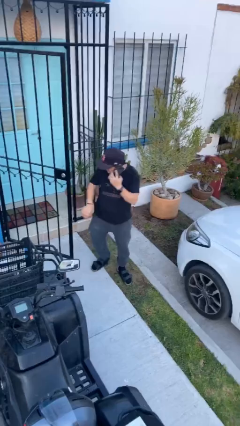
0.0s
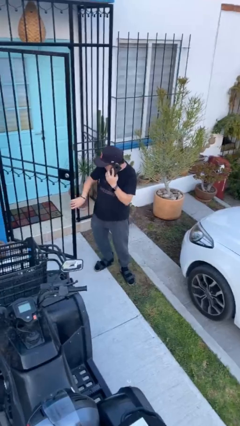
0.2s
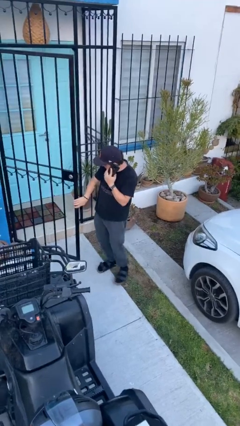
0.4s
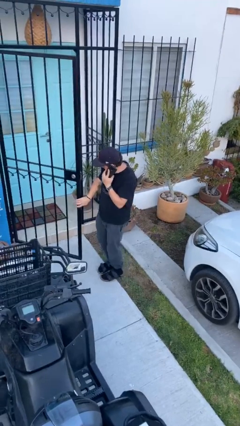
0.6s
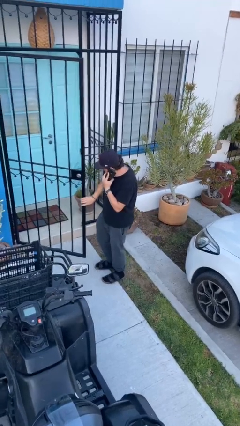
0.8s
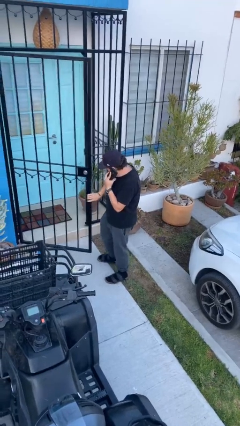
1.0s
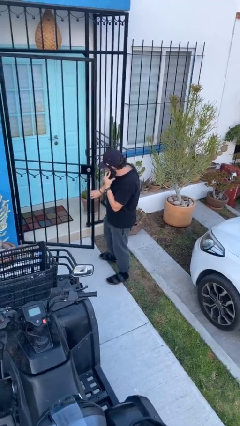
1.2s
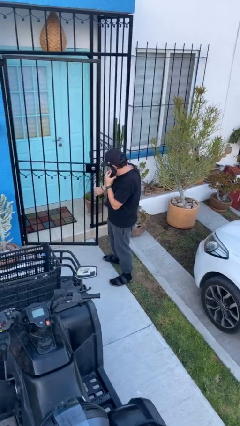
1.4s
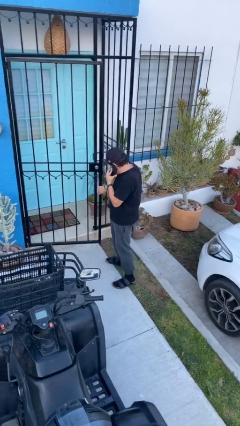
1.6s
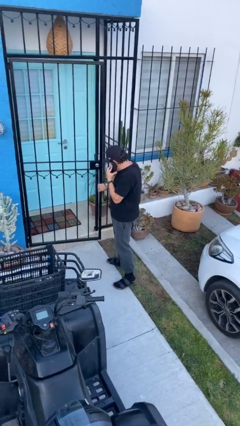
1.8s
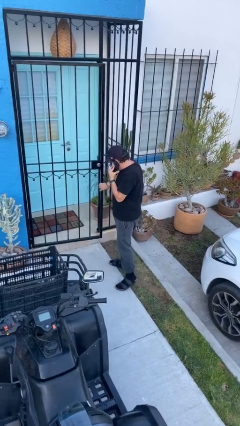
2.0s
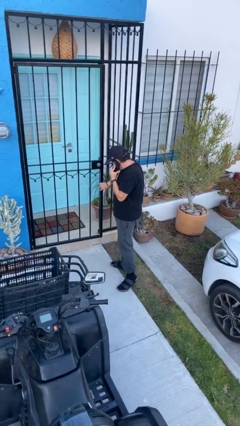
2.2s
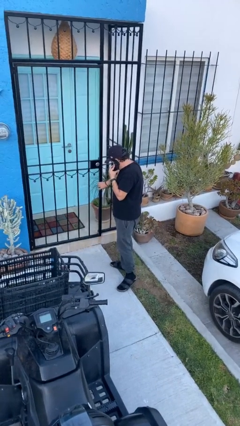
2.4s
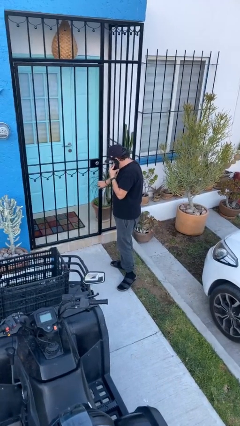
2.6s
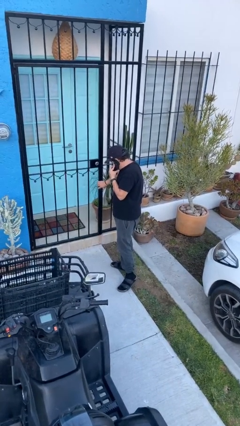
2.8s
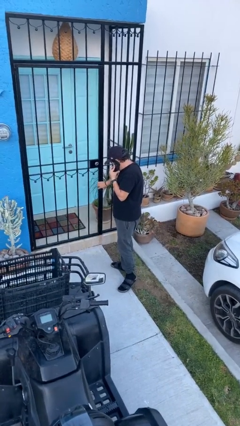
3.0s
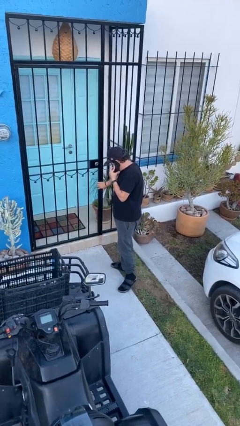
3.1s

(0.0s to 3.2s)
person closes facility door

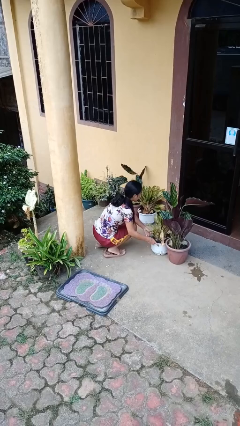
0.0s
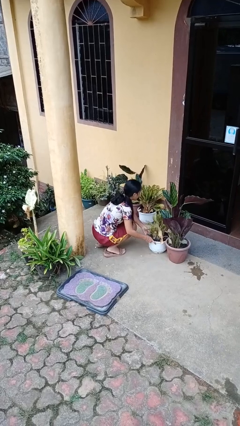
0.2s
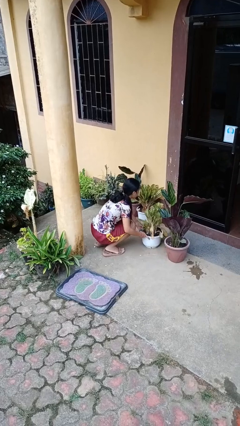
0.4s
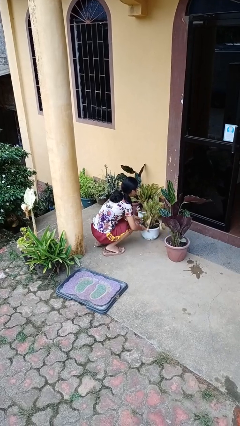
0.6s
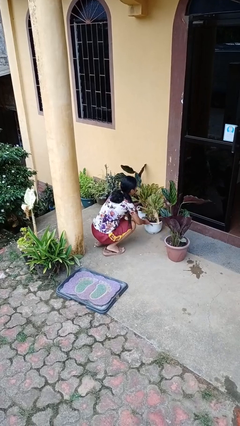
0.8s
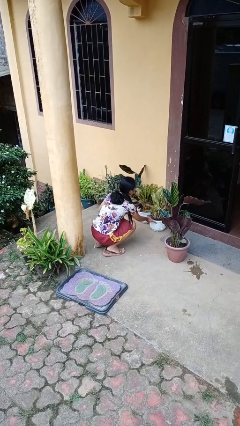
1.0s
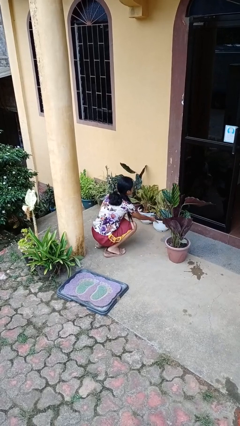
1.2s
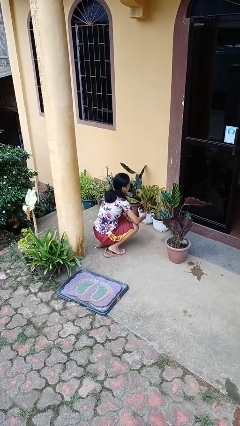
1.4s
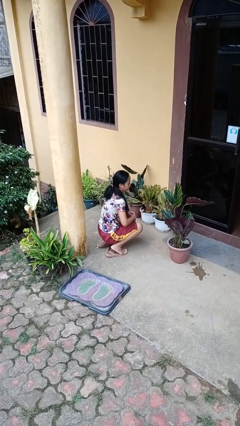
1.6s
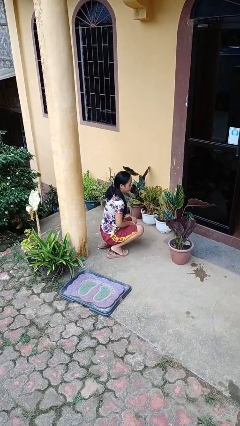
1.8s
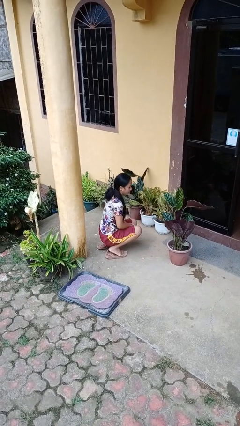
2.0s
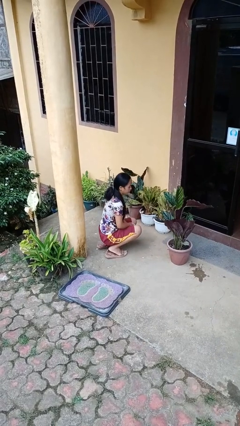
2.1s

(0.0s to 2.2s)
person arranges flowers in vase

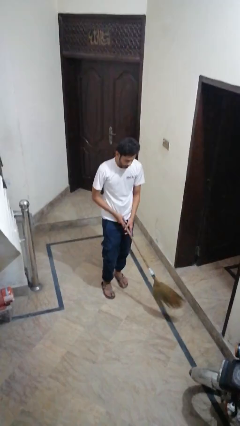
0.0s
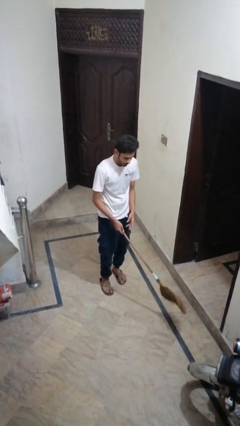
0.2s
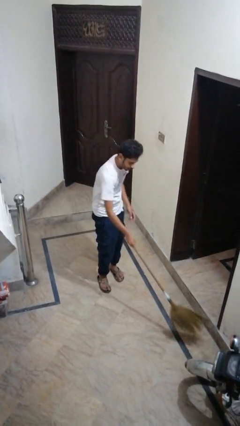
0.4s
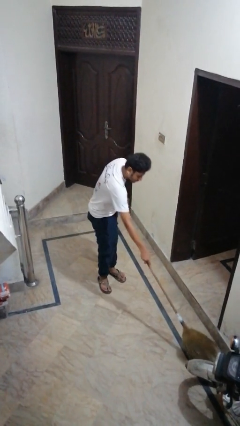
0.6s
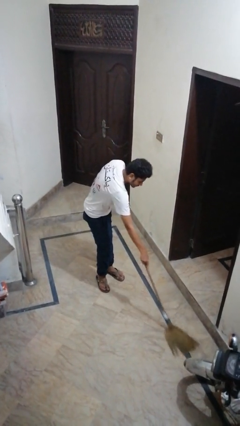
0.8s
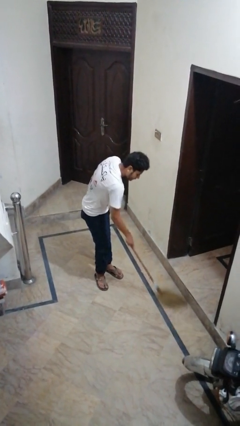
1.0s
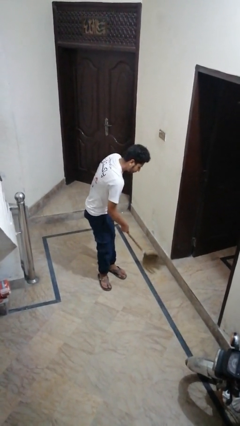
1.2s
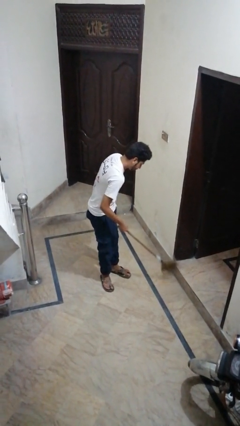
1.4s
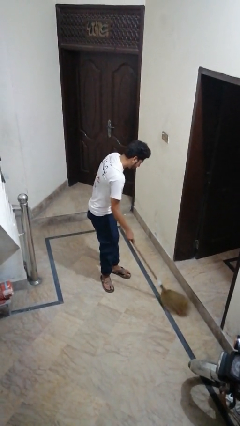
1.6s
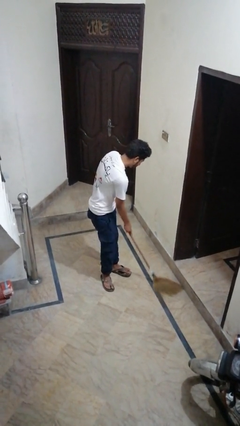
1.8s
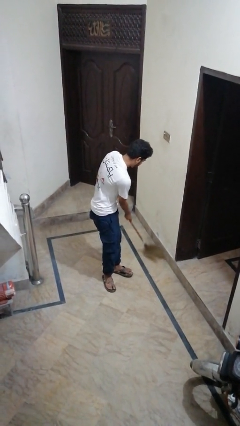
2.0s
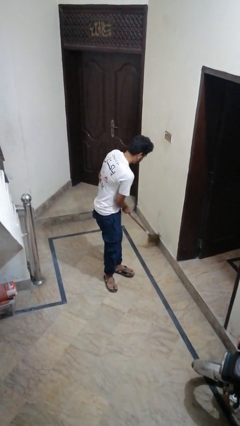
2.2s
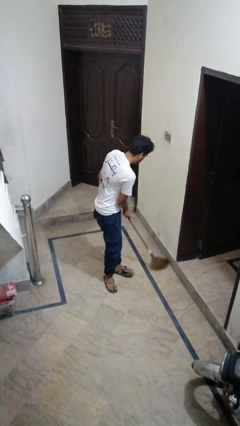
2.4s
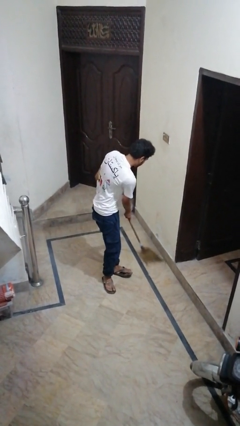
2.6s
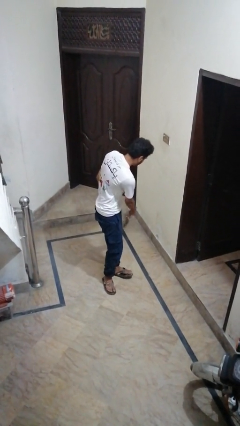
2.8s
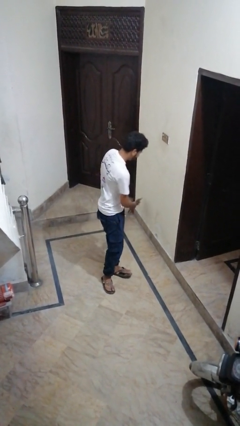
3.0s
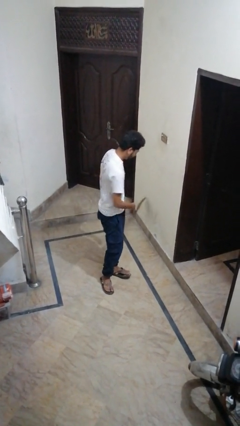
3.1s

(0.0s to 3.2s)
person sweeps floor

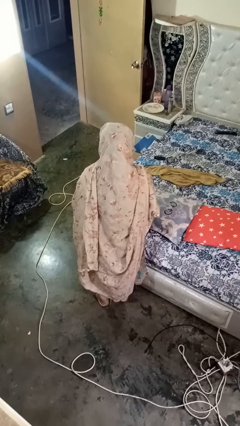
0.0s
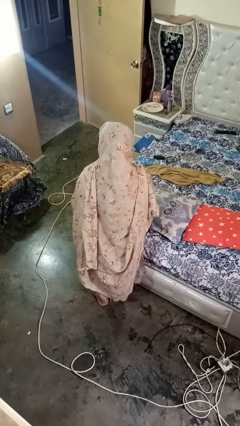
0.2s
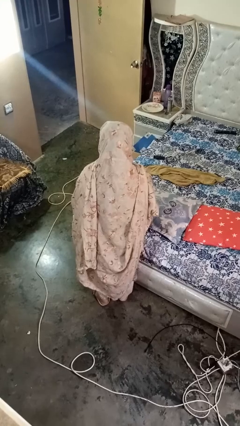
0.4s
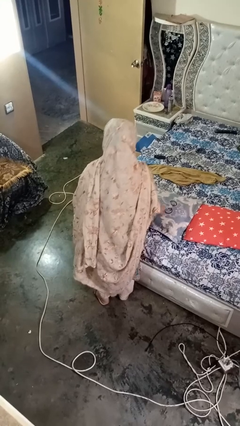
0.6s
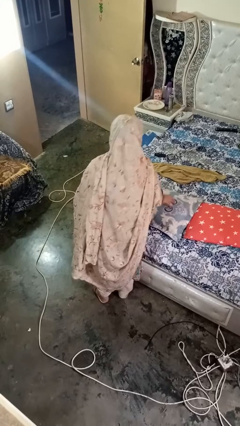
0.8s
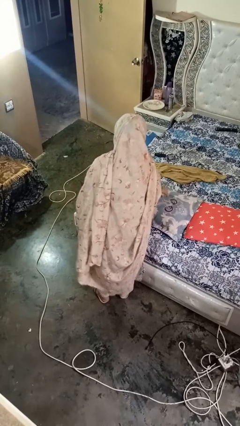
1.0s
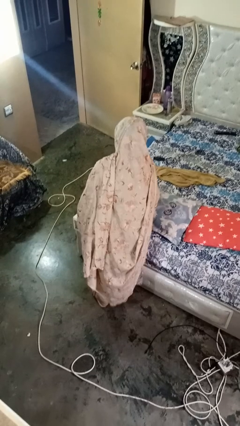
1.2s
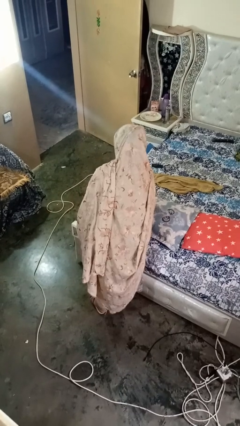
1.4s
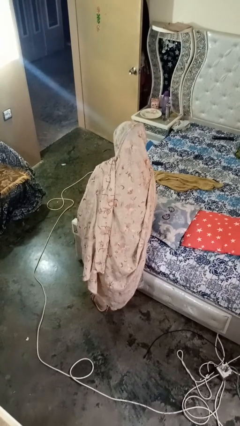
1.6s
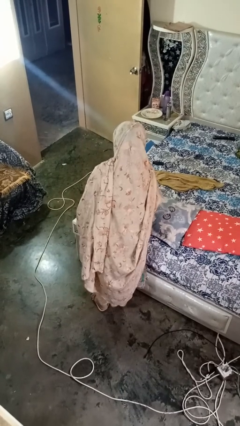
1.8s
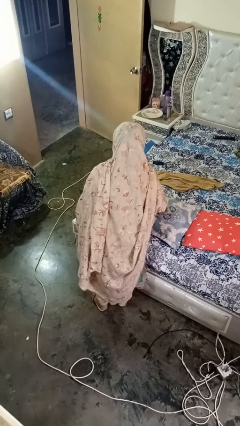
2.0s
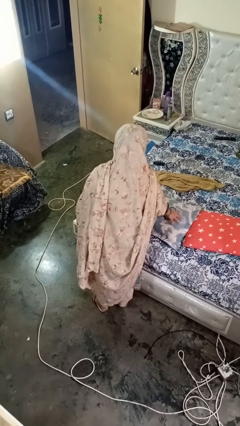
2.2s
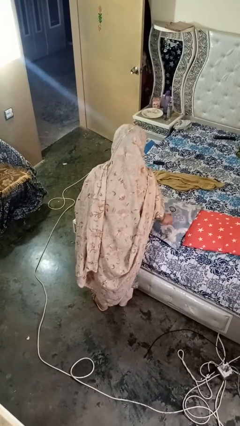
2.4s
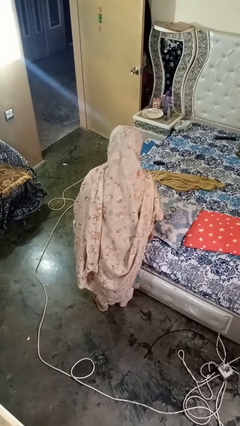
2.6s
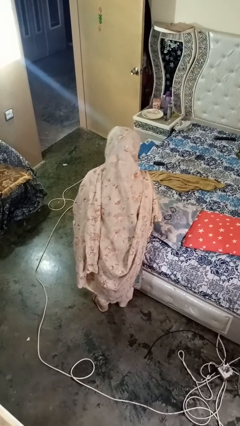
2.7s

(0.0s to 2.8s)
person taps object with finger

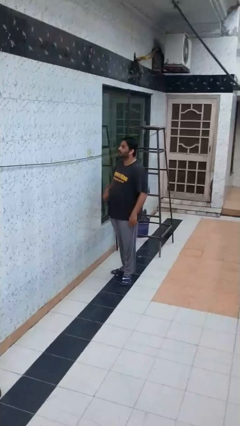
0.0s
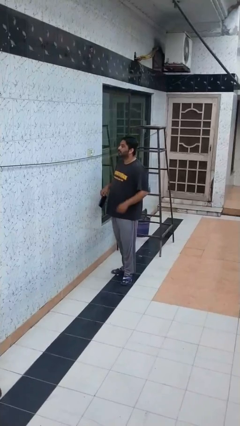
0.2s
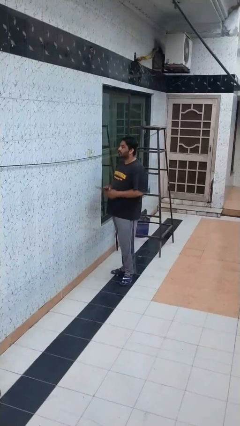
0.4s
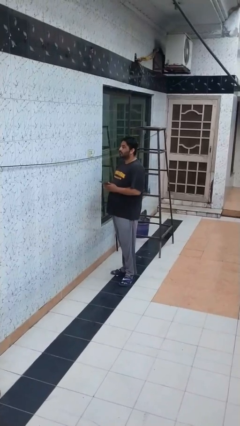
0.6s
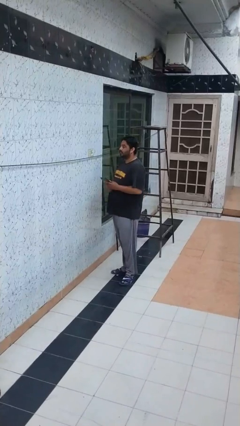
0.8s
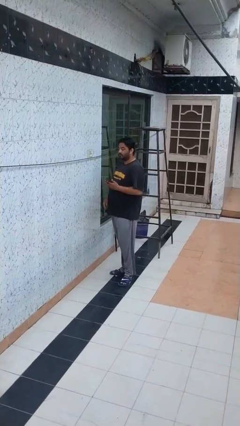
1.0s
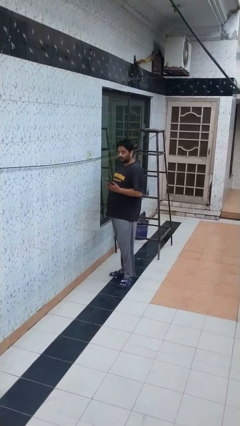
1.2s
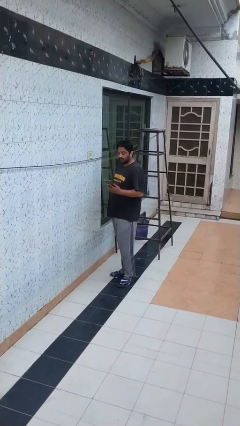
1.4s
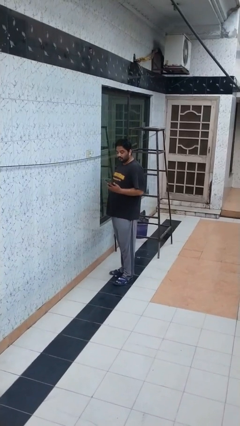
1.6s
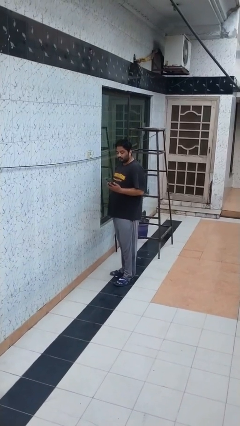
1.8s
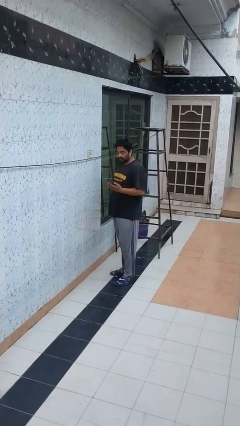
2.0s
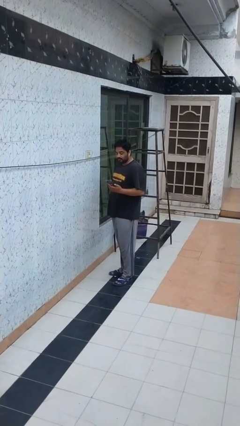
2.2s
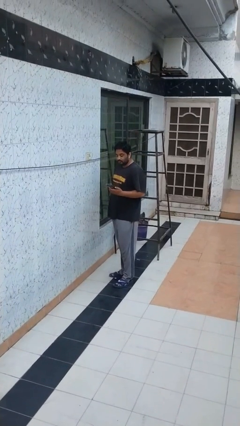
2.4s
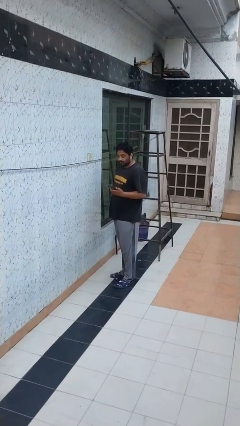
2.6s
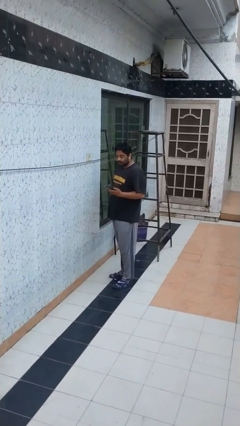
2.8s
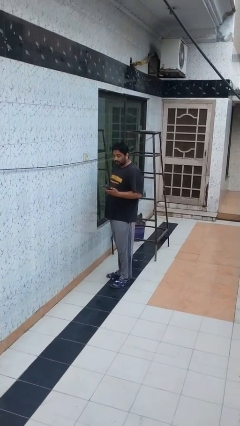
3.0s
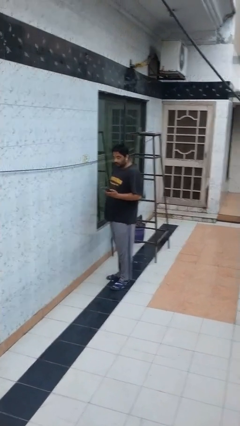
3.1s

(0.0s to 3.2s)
person takes phone from pocket

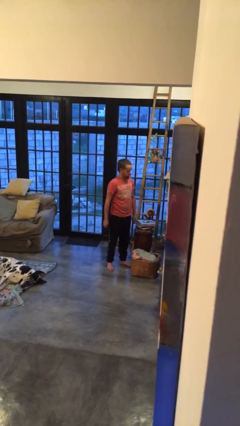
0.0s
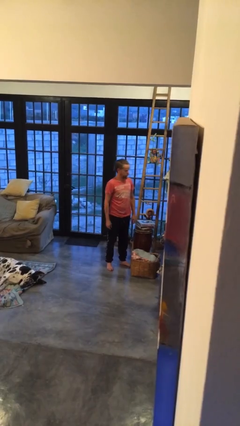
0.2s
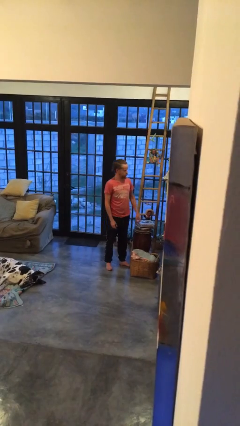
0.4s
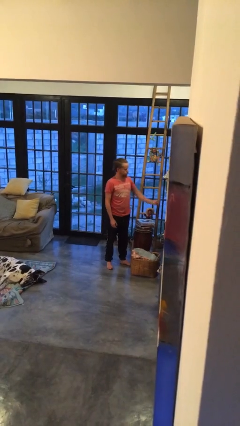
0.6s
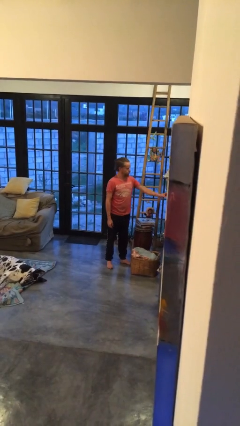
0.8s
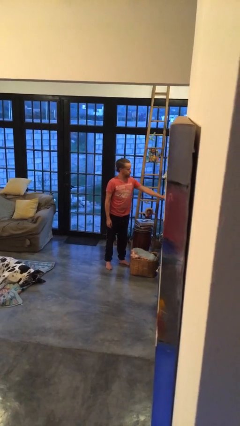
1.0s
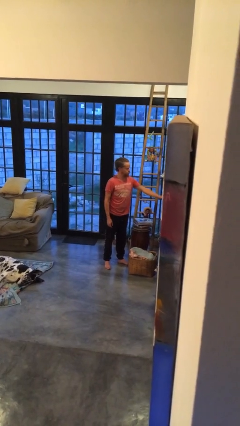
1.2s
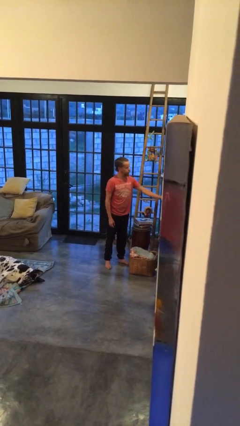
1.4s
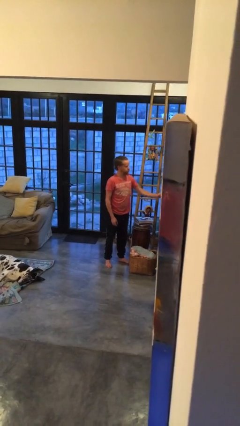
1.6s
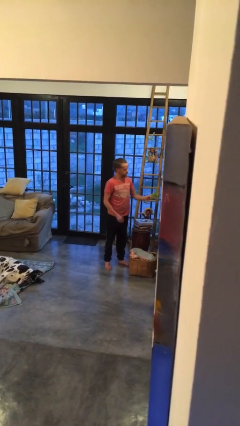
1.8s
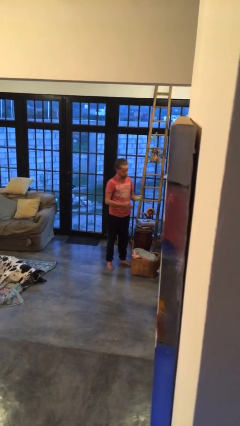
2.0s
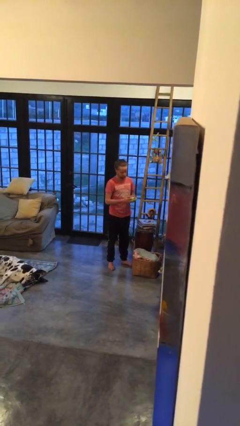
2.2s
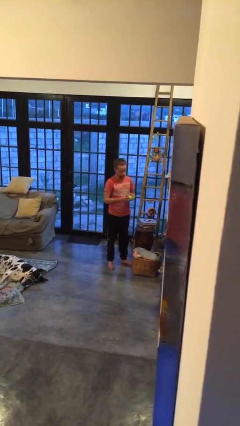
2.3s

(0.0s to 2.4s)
person picks up object from countertop

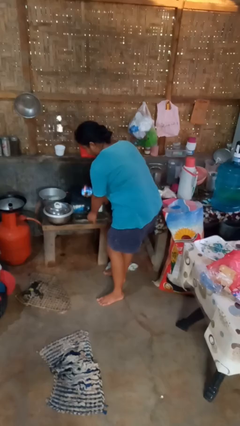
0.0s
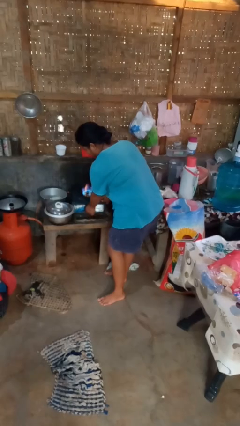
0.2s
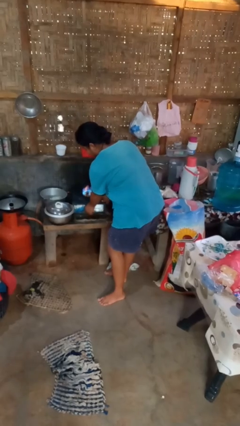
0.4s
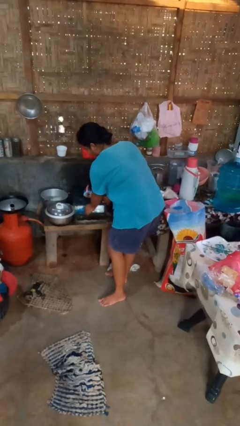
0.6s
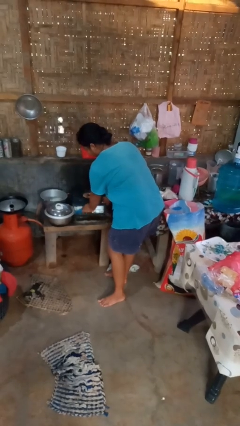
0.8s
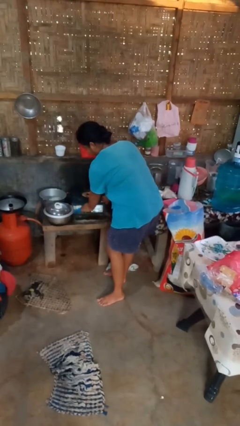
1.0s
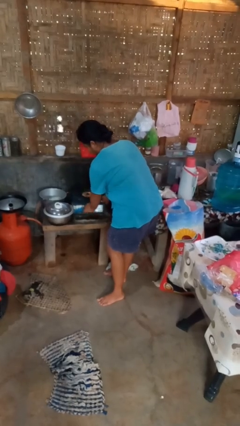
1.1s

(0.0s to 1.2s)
person turns off stovetop
